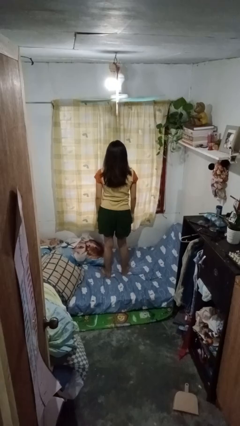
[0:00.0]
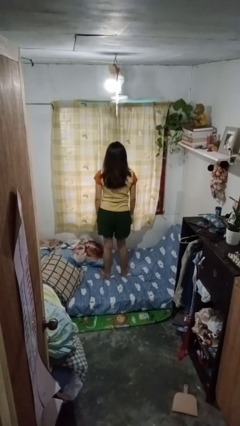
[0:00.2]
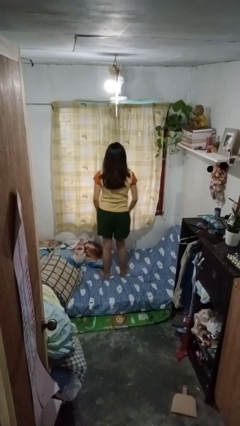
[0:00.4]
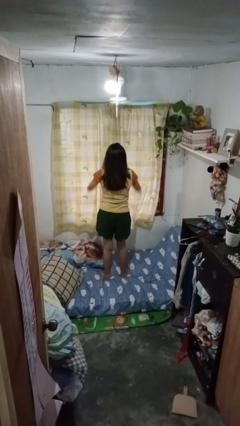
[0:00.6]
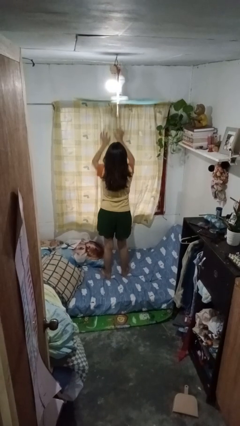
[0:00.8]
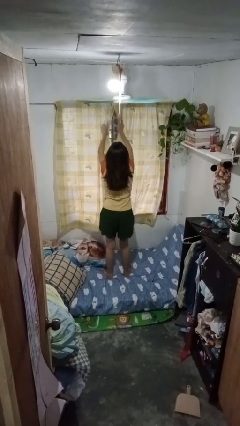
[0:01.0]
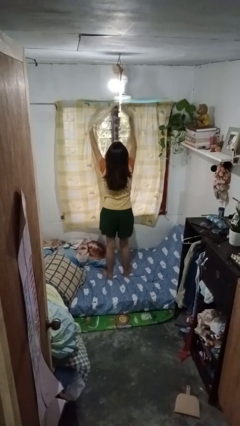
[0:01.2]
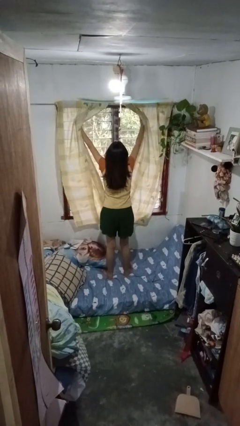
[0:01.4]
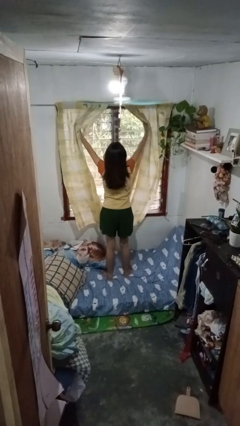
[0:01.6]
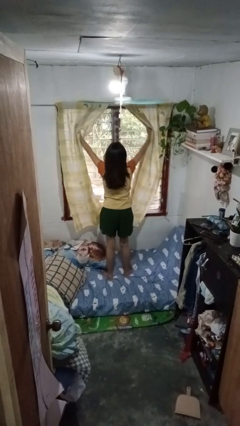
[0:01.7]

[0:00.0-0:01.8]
person opens curtains

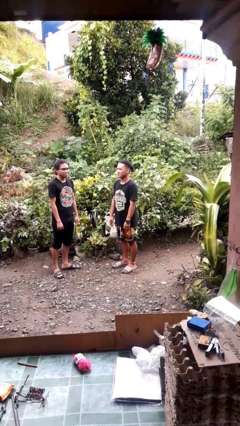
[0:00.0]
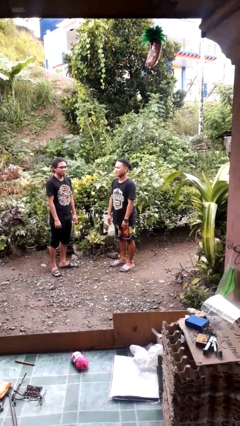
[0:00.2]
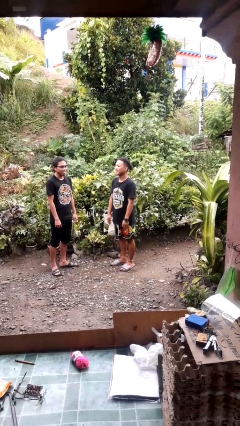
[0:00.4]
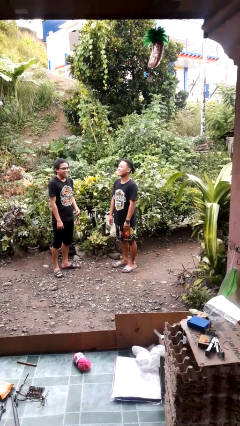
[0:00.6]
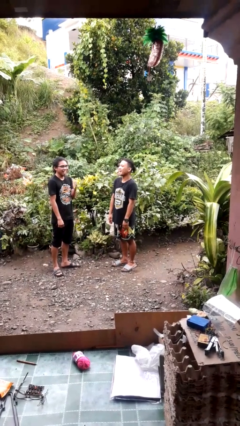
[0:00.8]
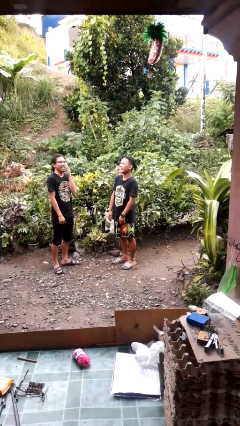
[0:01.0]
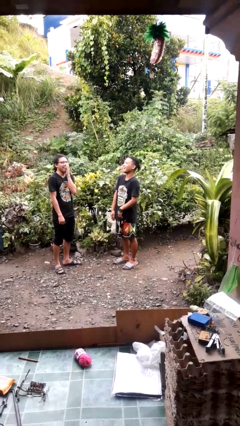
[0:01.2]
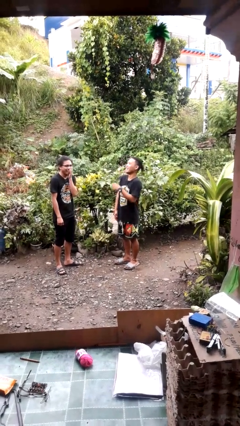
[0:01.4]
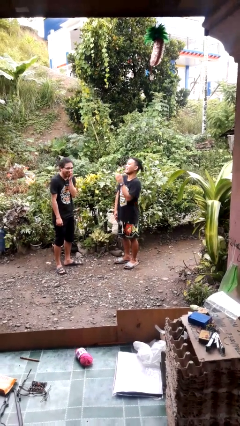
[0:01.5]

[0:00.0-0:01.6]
person laughs with person

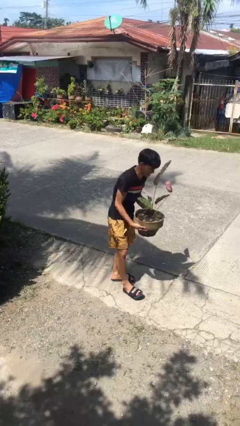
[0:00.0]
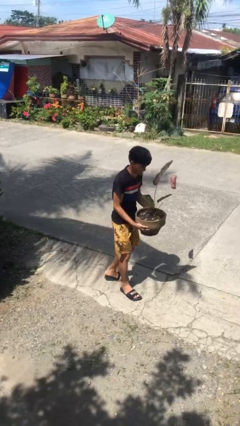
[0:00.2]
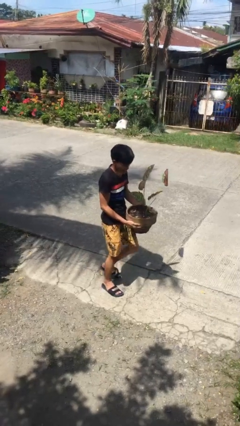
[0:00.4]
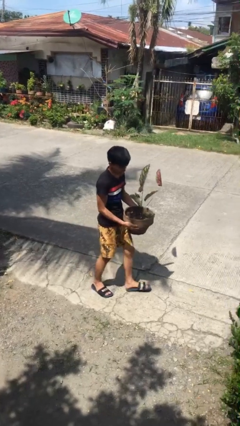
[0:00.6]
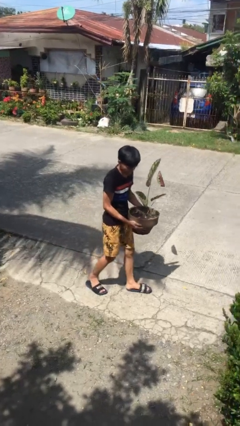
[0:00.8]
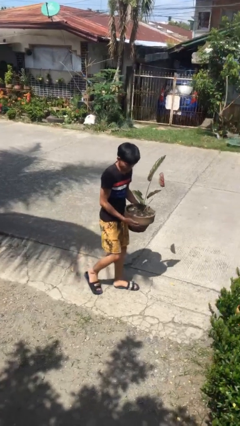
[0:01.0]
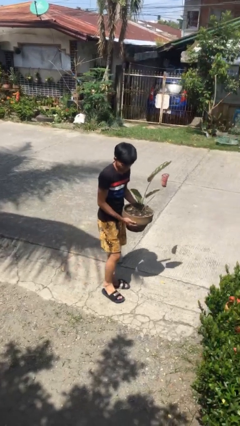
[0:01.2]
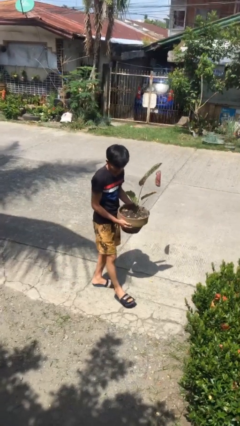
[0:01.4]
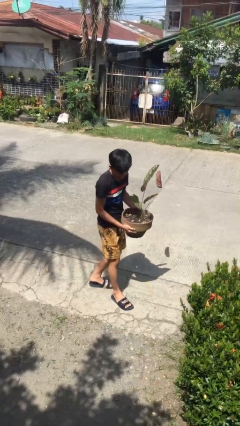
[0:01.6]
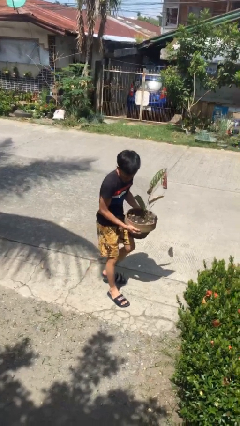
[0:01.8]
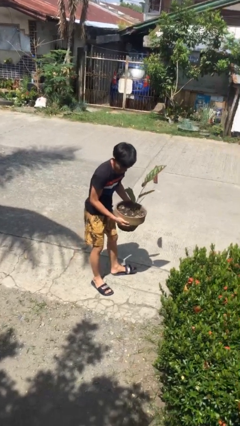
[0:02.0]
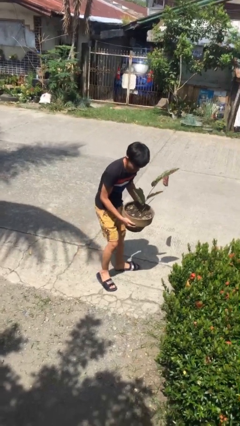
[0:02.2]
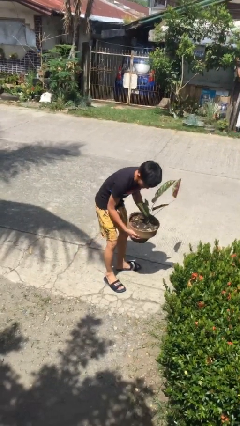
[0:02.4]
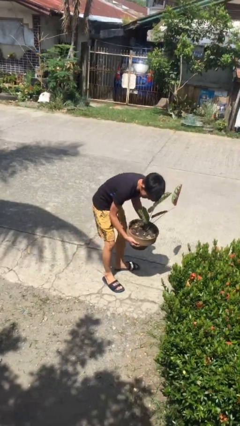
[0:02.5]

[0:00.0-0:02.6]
person carries heavy object

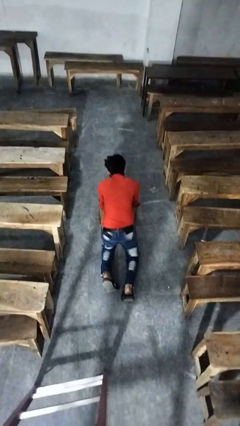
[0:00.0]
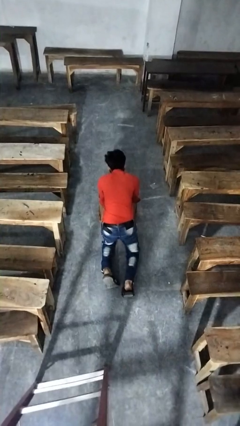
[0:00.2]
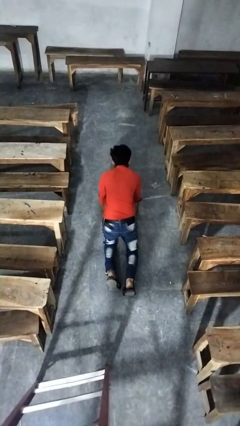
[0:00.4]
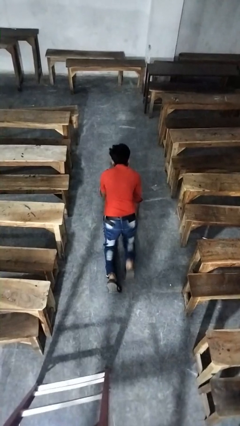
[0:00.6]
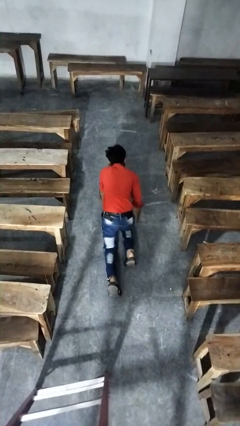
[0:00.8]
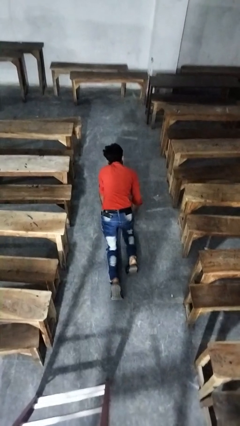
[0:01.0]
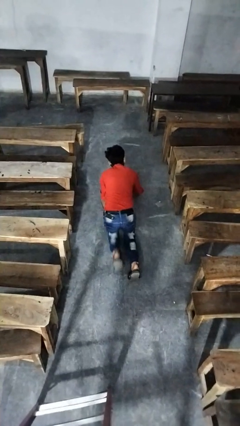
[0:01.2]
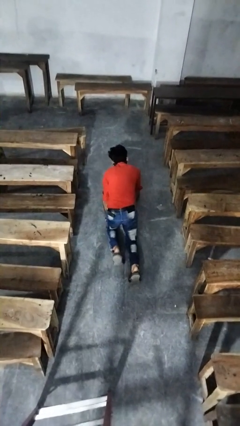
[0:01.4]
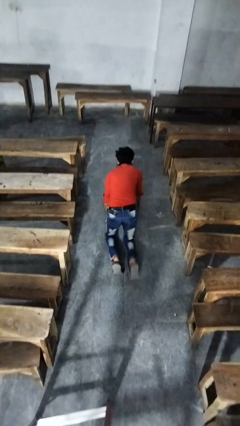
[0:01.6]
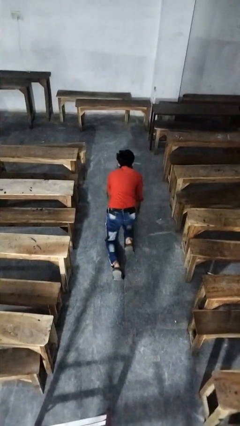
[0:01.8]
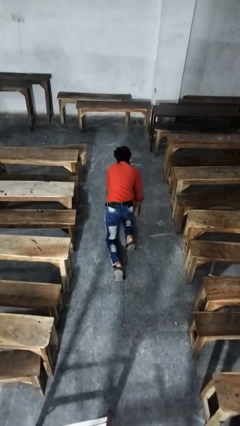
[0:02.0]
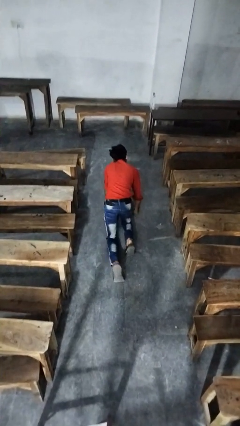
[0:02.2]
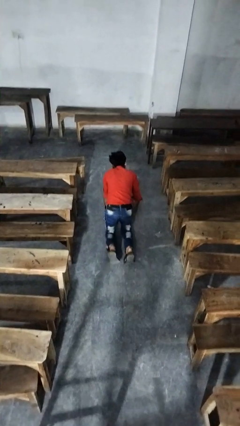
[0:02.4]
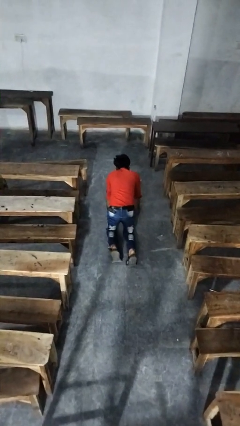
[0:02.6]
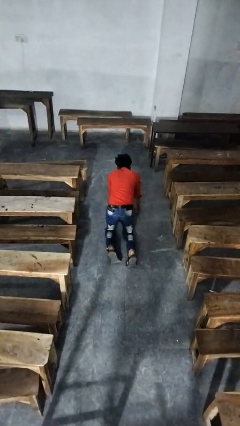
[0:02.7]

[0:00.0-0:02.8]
person crawls

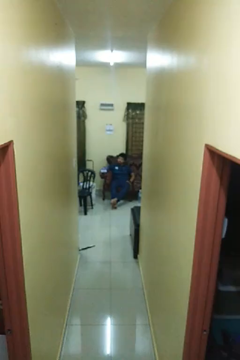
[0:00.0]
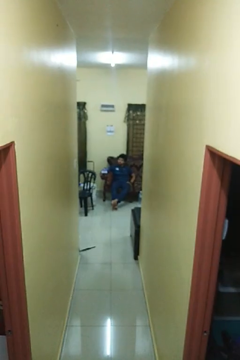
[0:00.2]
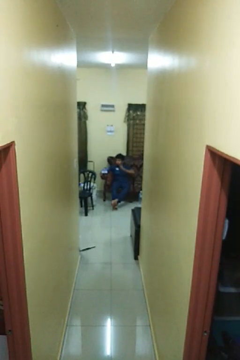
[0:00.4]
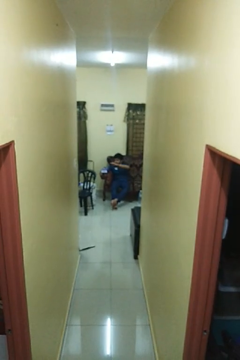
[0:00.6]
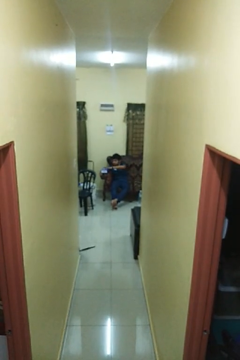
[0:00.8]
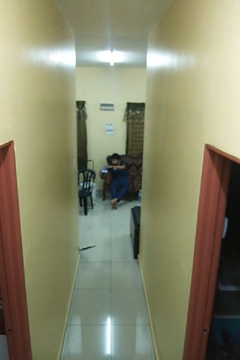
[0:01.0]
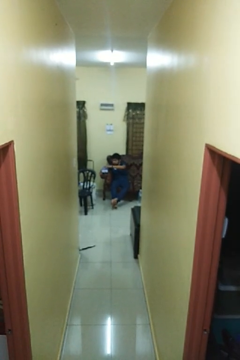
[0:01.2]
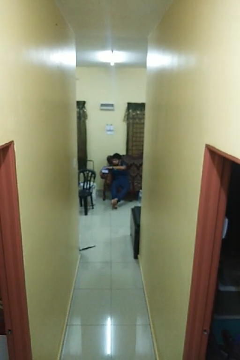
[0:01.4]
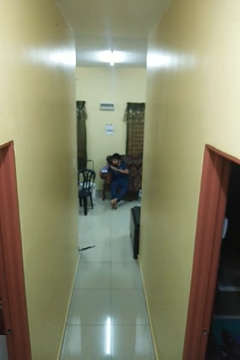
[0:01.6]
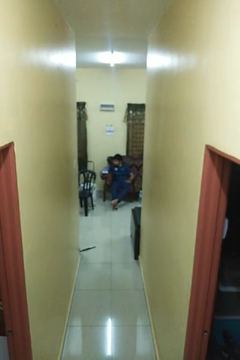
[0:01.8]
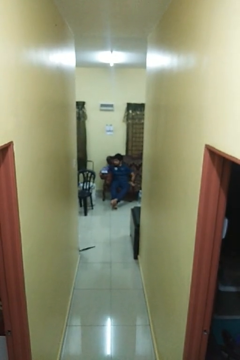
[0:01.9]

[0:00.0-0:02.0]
person taps object with finger

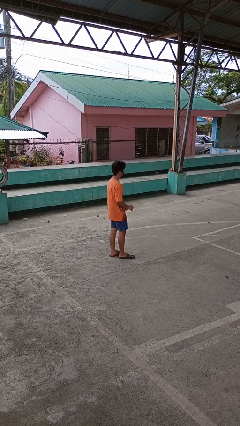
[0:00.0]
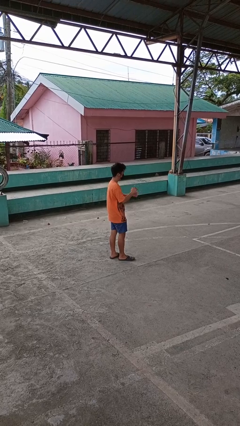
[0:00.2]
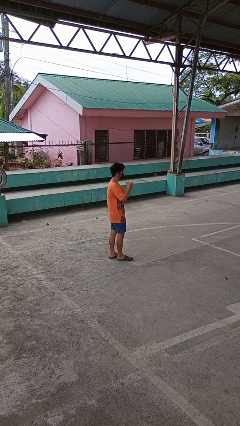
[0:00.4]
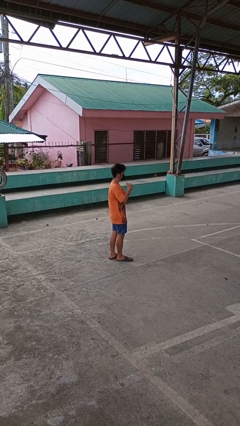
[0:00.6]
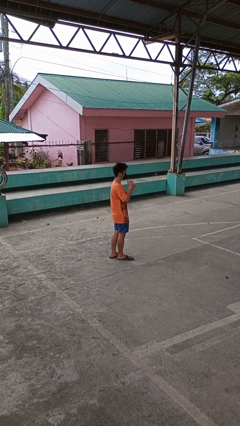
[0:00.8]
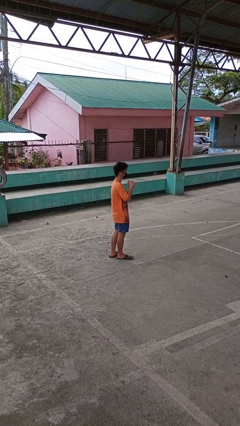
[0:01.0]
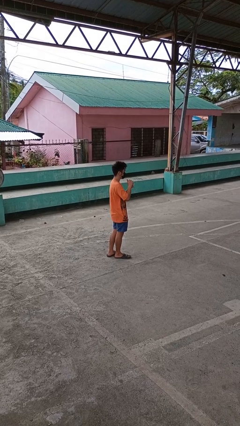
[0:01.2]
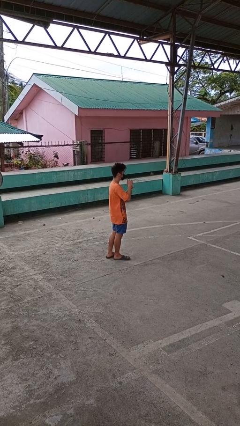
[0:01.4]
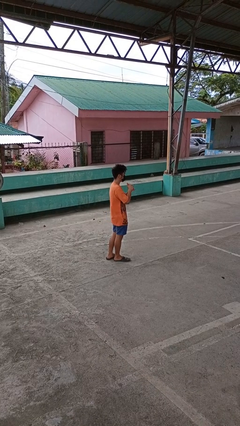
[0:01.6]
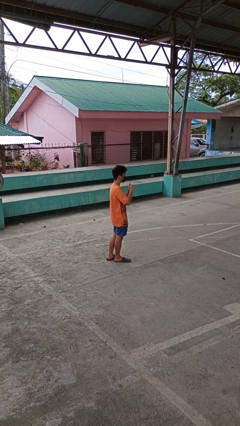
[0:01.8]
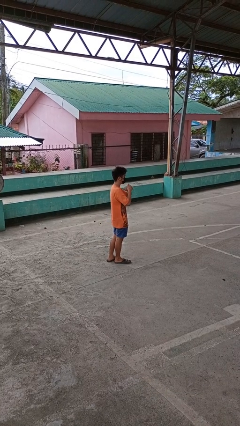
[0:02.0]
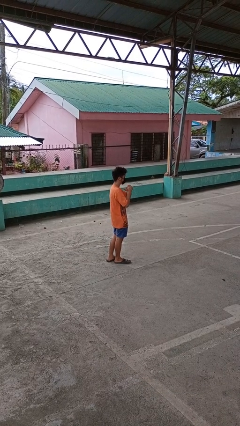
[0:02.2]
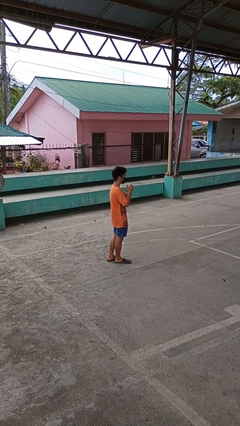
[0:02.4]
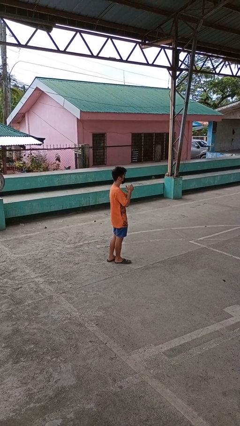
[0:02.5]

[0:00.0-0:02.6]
person cracks knuckles

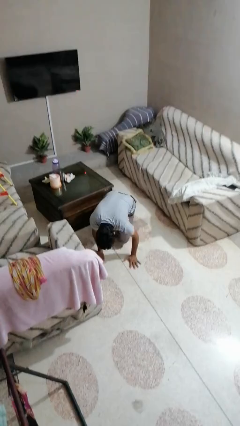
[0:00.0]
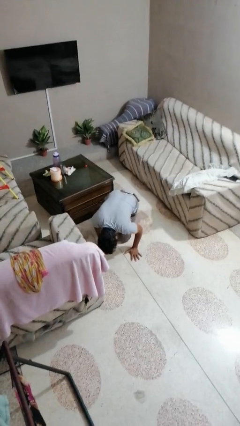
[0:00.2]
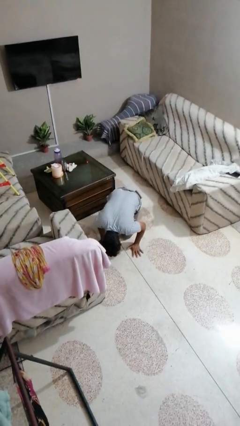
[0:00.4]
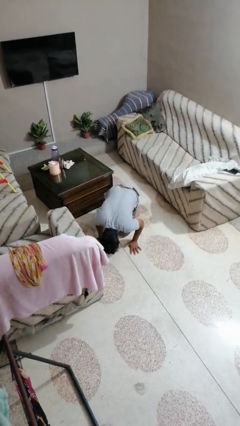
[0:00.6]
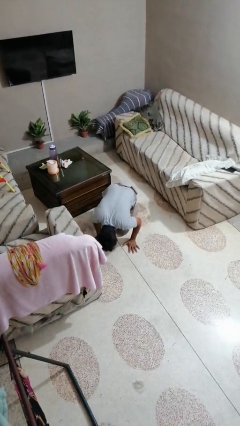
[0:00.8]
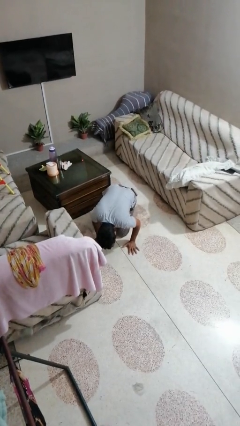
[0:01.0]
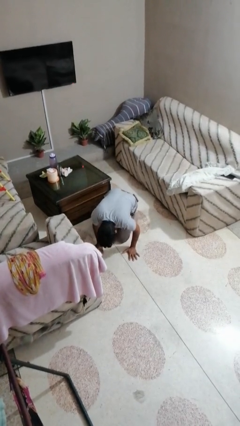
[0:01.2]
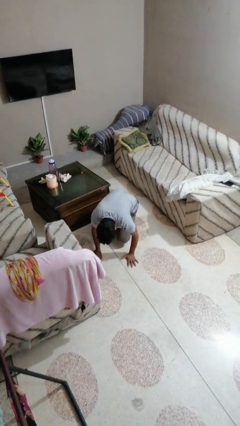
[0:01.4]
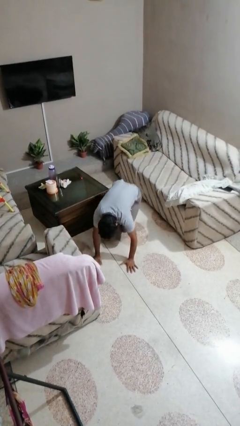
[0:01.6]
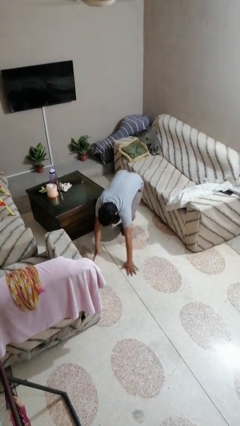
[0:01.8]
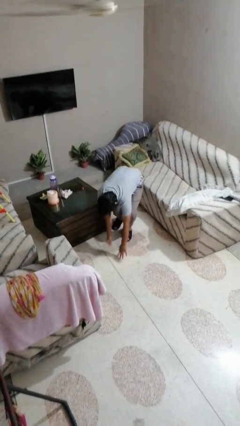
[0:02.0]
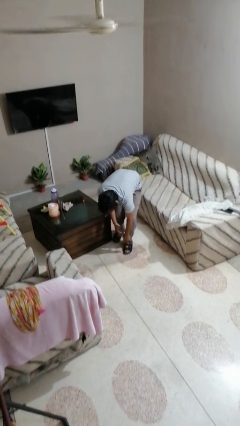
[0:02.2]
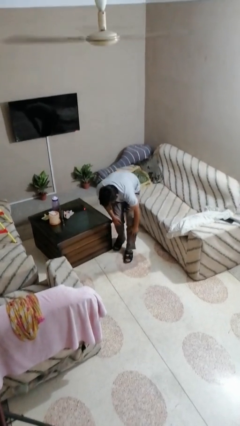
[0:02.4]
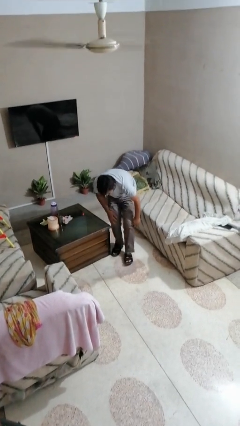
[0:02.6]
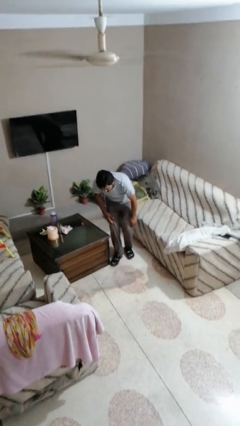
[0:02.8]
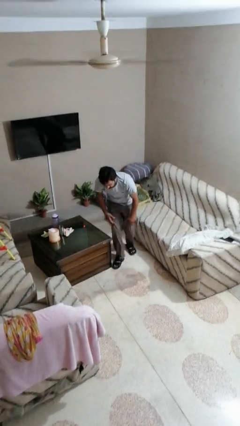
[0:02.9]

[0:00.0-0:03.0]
person stands up from floor

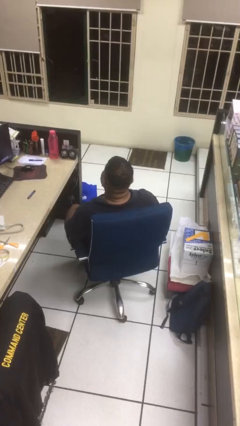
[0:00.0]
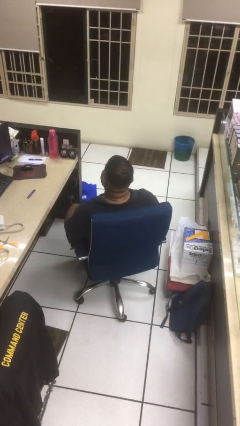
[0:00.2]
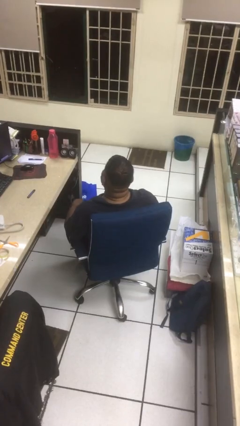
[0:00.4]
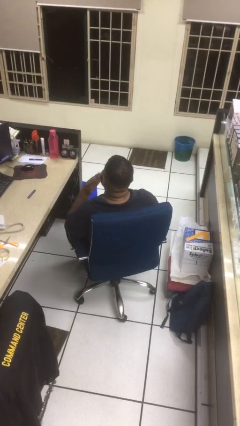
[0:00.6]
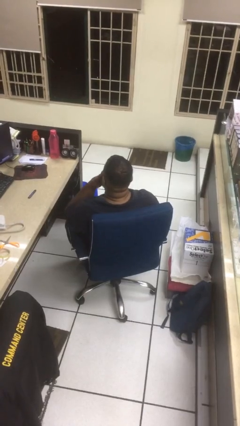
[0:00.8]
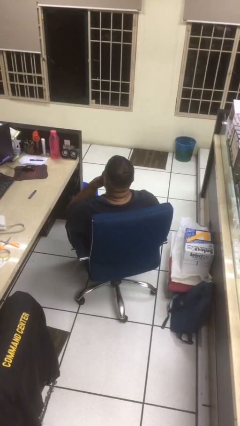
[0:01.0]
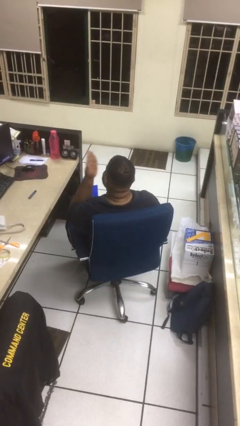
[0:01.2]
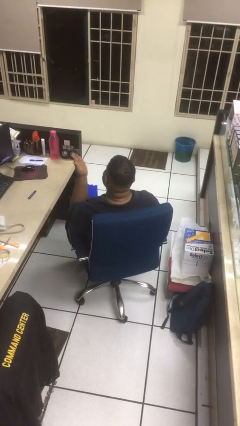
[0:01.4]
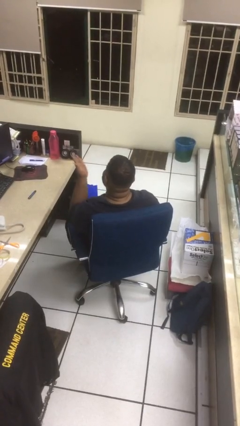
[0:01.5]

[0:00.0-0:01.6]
person gestures blow kiss
